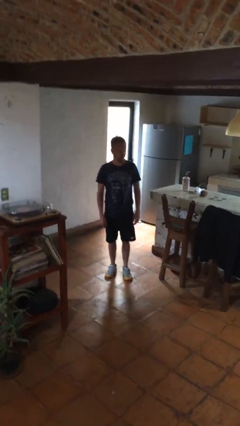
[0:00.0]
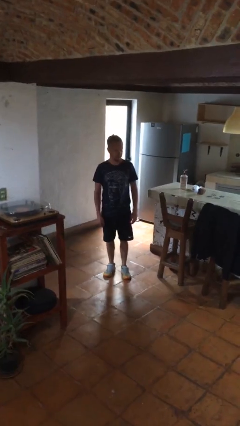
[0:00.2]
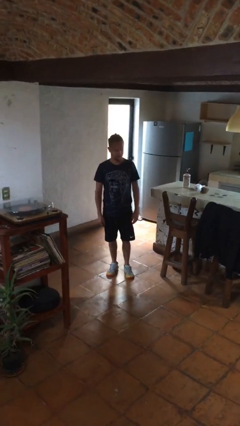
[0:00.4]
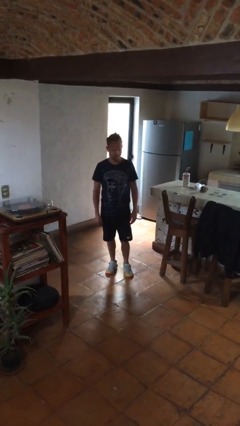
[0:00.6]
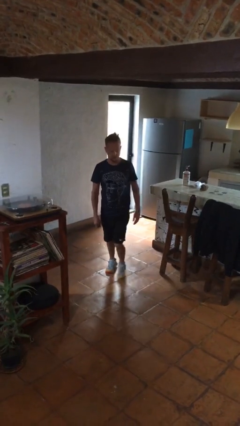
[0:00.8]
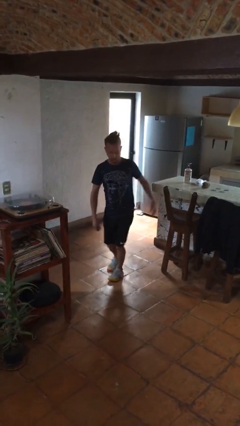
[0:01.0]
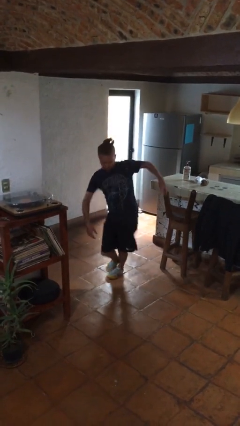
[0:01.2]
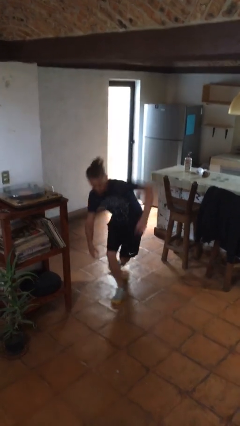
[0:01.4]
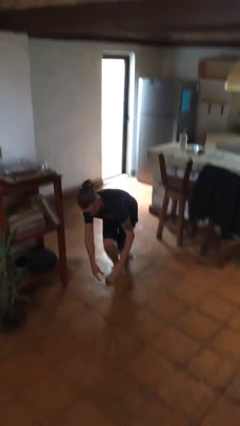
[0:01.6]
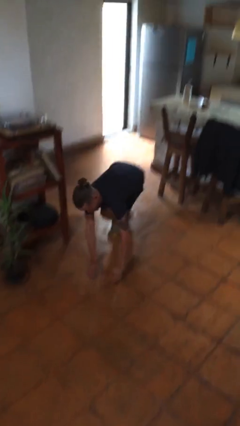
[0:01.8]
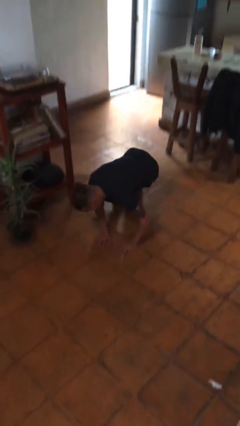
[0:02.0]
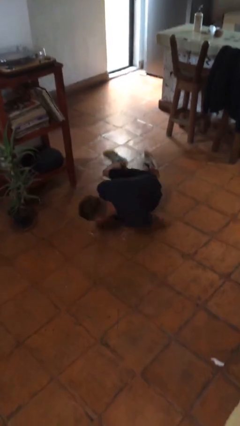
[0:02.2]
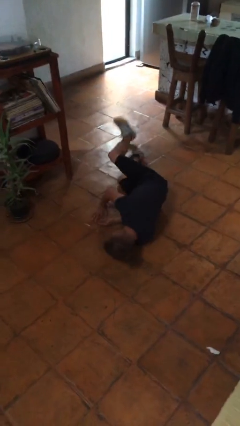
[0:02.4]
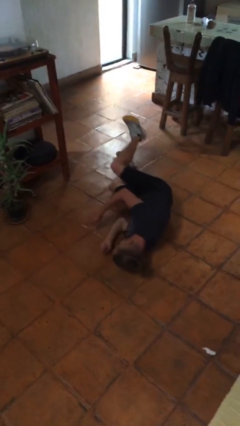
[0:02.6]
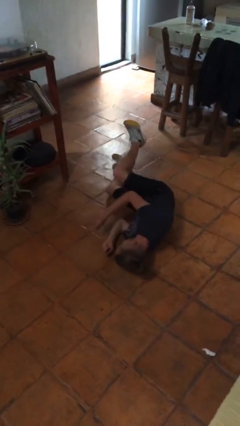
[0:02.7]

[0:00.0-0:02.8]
person trips on object on floor

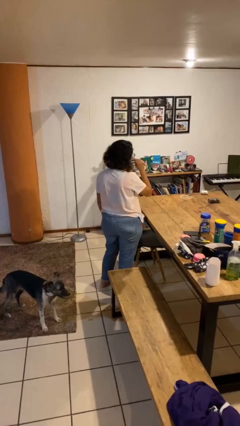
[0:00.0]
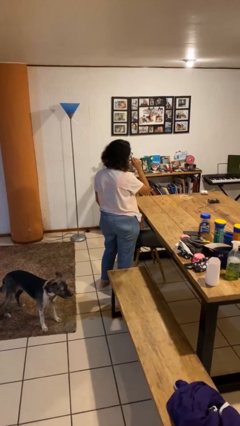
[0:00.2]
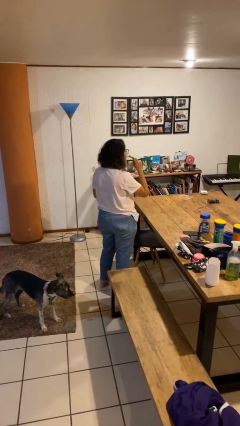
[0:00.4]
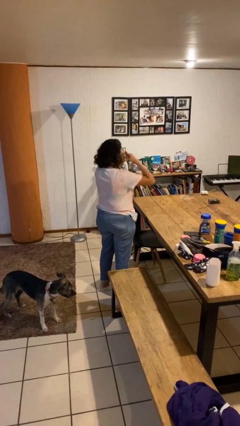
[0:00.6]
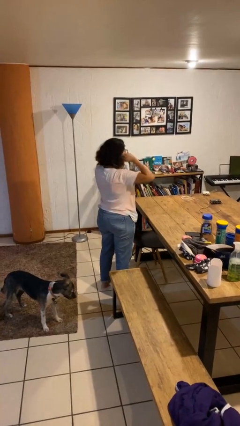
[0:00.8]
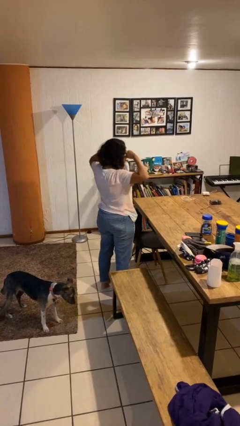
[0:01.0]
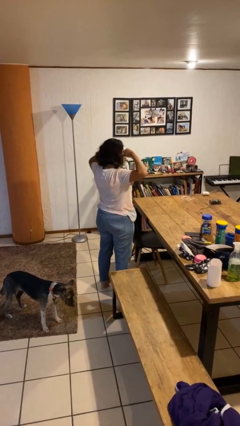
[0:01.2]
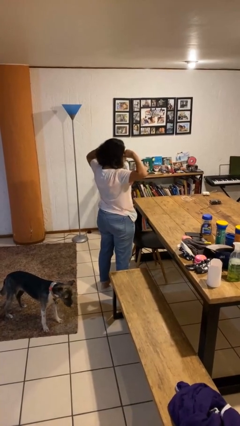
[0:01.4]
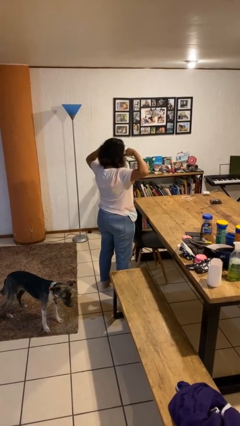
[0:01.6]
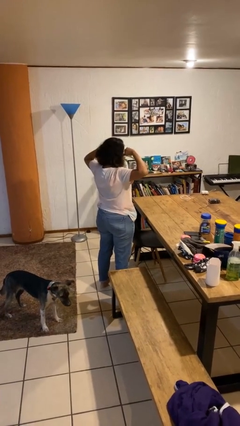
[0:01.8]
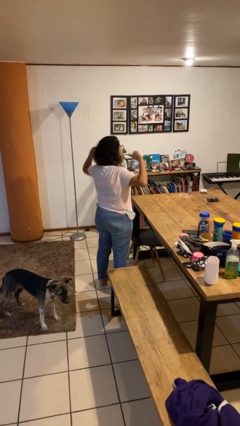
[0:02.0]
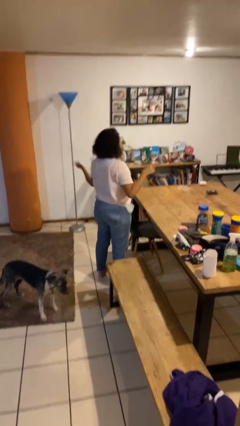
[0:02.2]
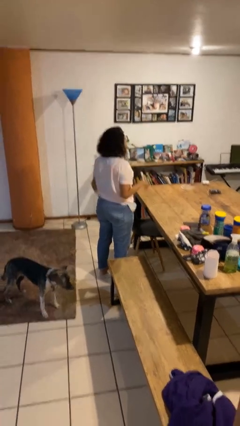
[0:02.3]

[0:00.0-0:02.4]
person puts fingers in ear

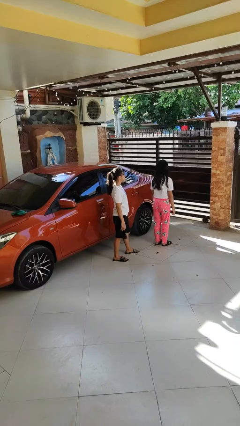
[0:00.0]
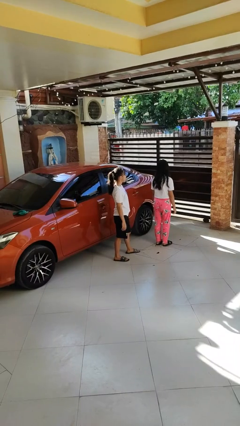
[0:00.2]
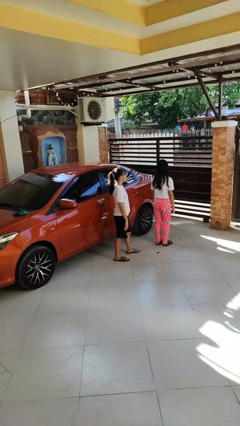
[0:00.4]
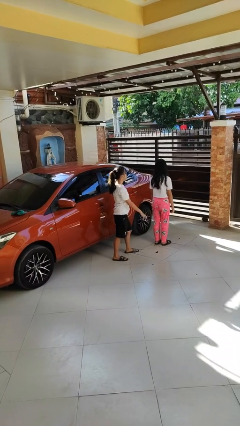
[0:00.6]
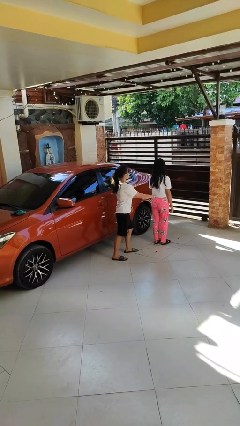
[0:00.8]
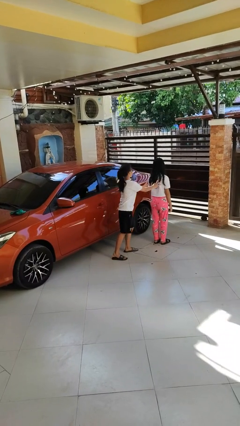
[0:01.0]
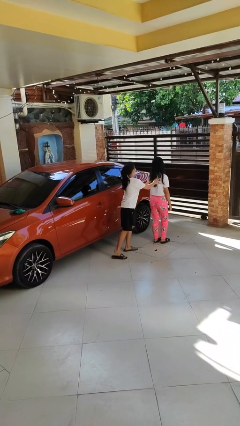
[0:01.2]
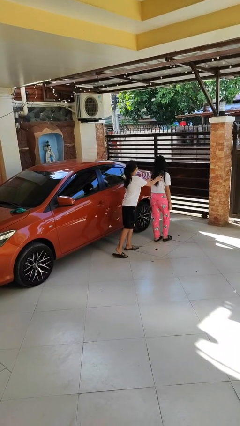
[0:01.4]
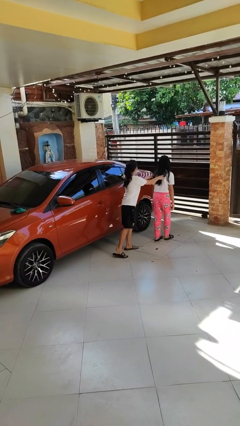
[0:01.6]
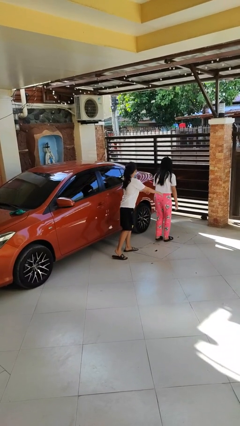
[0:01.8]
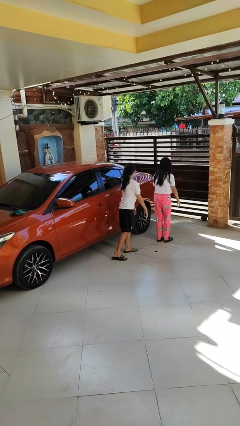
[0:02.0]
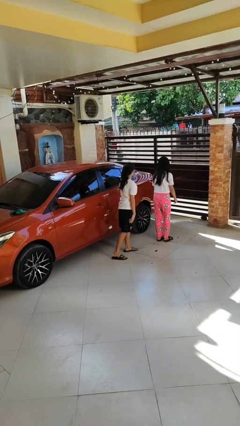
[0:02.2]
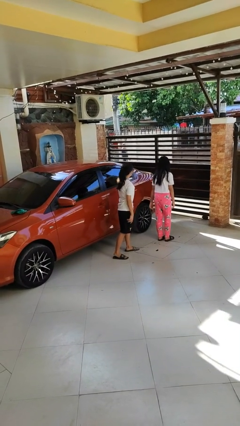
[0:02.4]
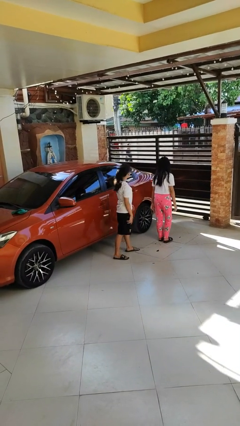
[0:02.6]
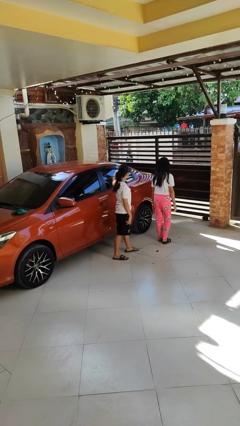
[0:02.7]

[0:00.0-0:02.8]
person shoves person

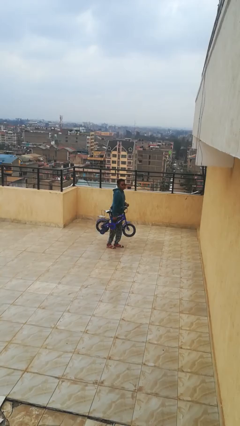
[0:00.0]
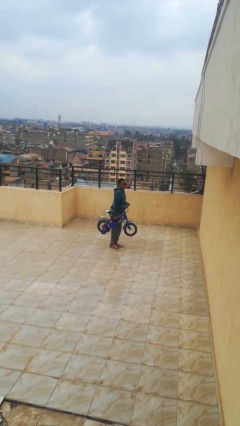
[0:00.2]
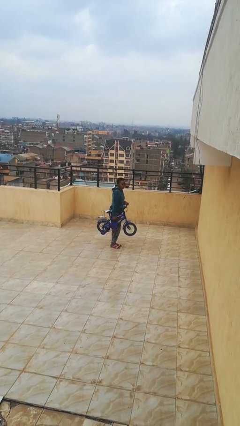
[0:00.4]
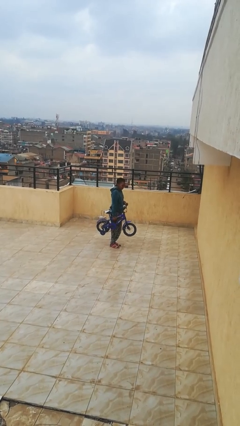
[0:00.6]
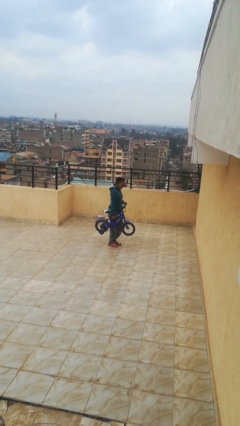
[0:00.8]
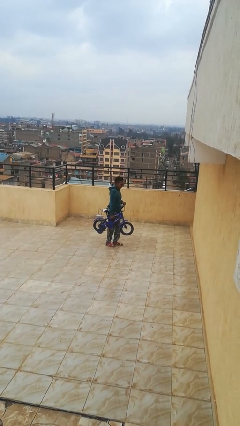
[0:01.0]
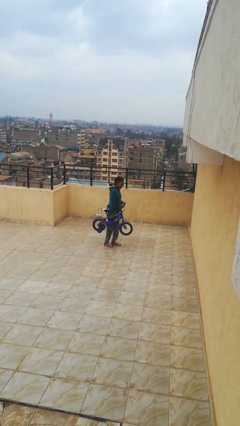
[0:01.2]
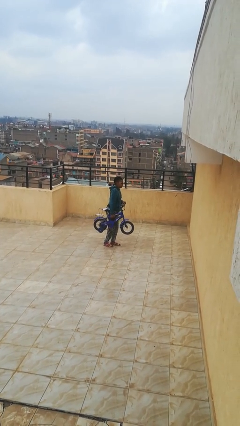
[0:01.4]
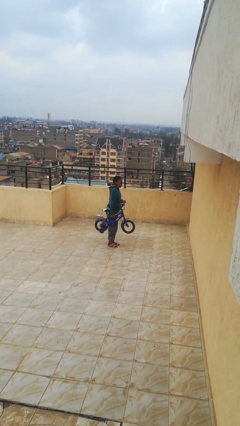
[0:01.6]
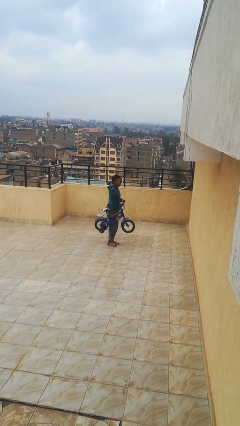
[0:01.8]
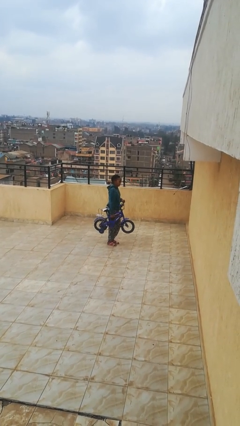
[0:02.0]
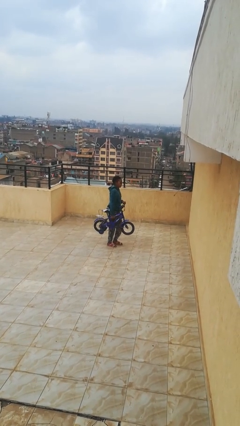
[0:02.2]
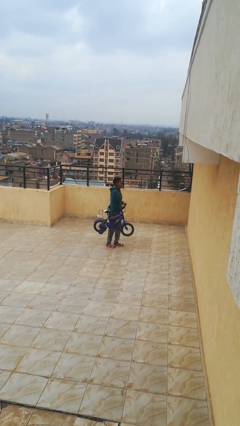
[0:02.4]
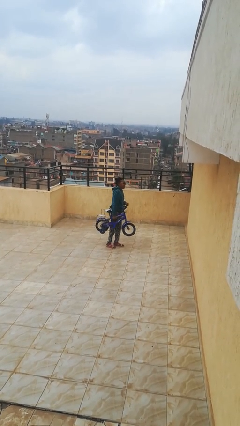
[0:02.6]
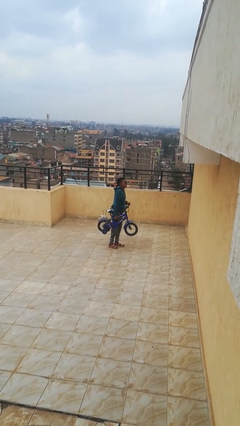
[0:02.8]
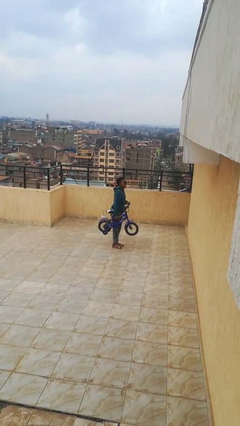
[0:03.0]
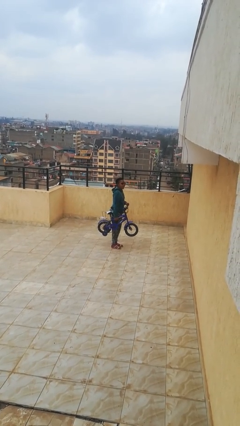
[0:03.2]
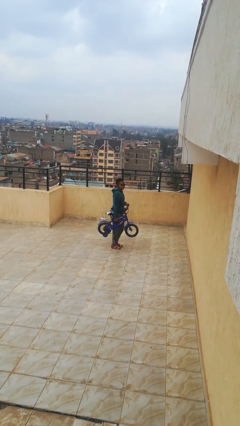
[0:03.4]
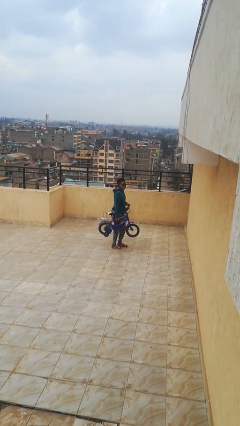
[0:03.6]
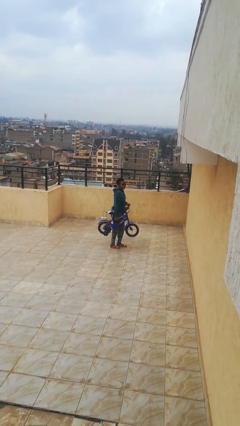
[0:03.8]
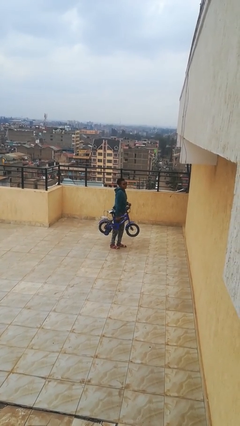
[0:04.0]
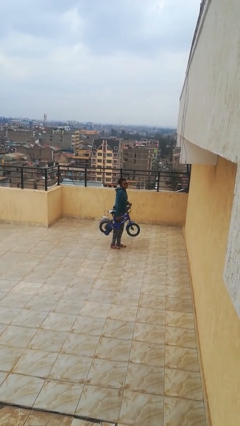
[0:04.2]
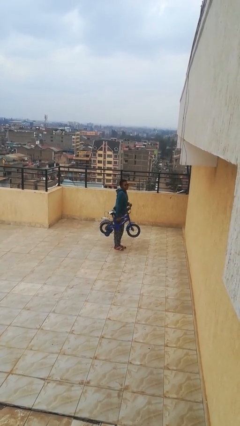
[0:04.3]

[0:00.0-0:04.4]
person carries bicycle

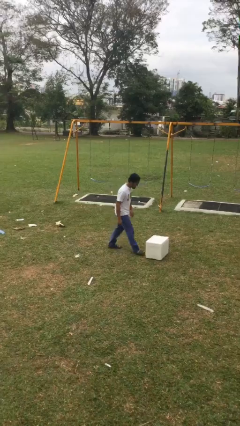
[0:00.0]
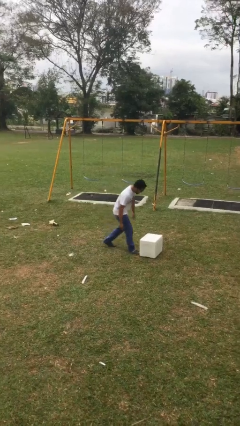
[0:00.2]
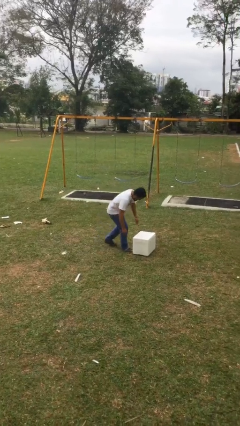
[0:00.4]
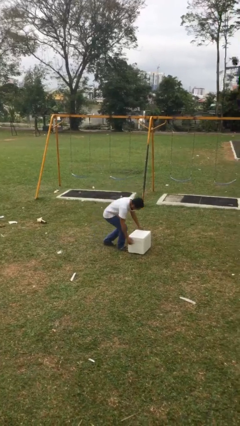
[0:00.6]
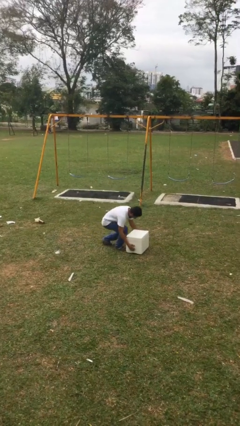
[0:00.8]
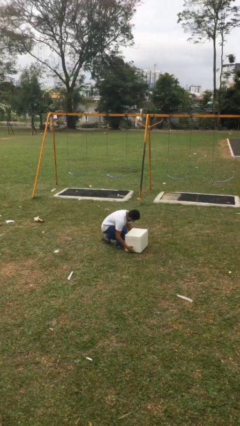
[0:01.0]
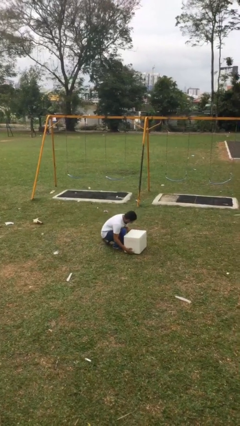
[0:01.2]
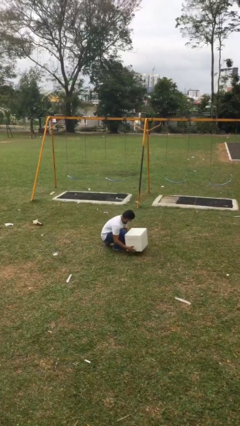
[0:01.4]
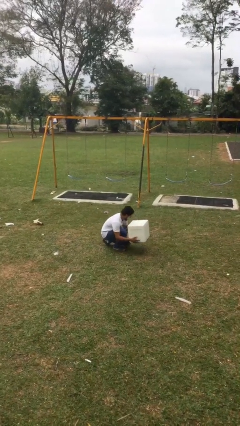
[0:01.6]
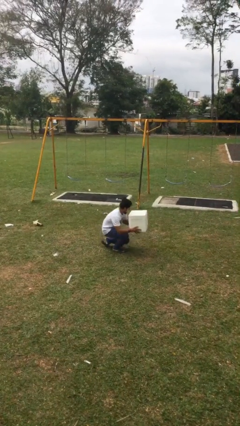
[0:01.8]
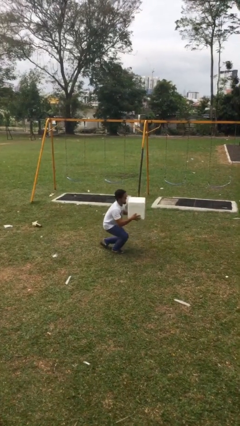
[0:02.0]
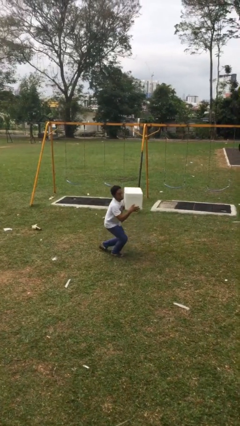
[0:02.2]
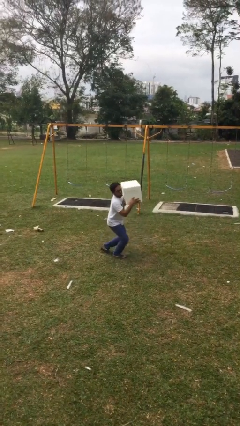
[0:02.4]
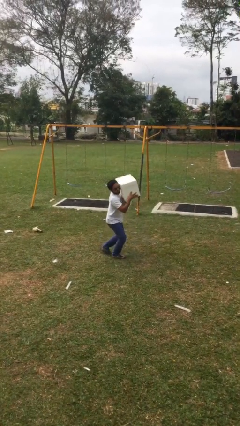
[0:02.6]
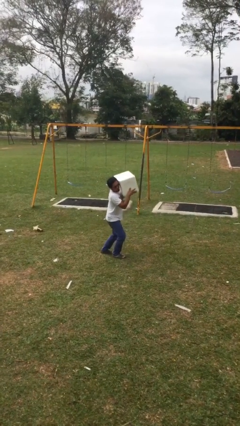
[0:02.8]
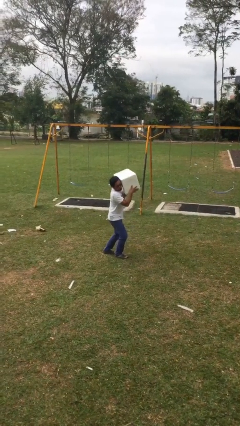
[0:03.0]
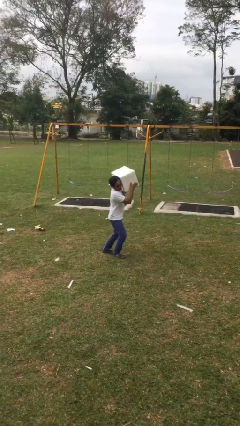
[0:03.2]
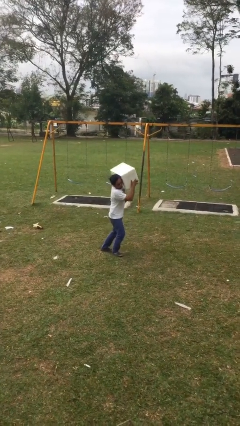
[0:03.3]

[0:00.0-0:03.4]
person picks up object from floor

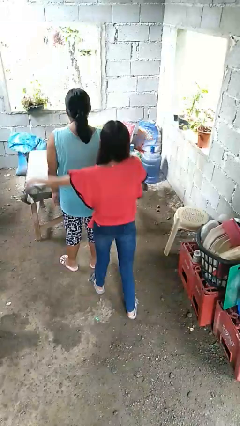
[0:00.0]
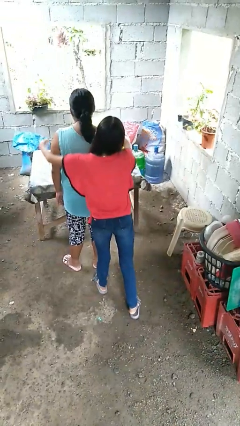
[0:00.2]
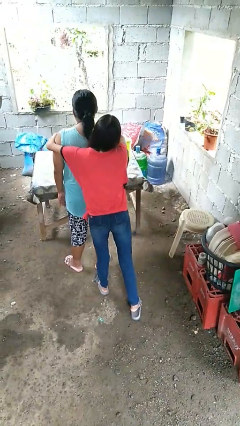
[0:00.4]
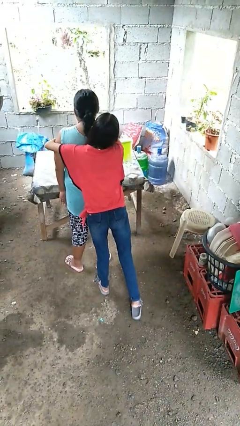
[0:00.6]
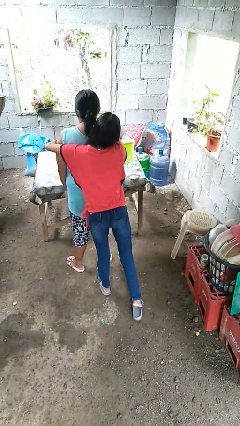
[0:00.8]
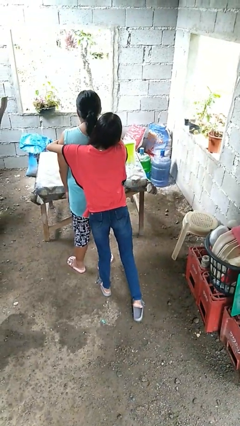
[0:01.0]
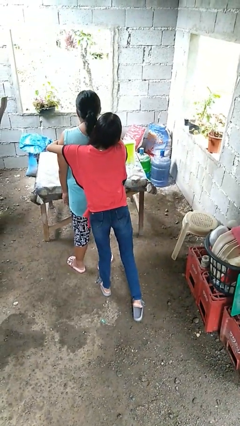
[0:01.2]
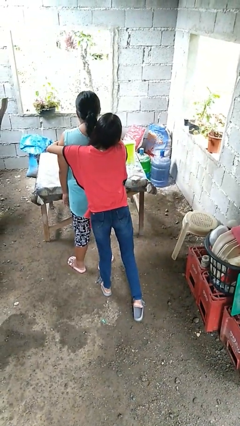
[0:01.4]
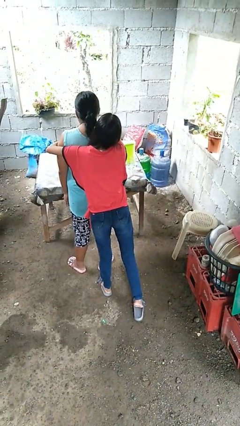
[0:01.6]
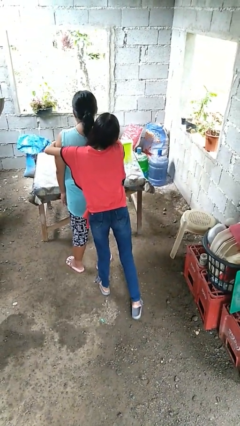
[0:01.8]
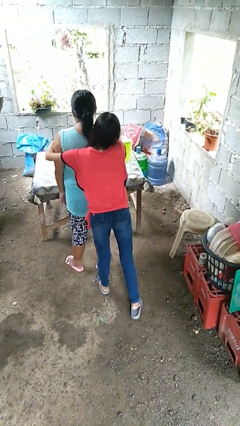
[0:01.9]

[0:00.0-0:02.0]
person hugs person from behind
